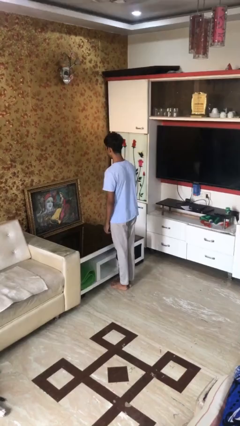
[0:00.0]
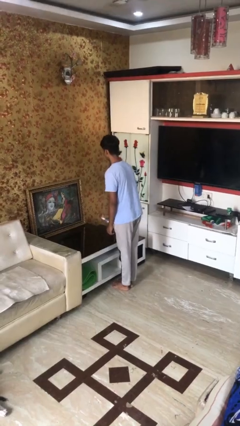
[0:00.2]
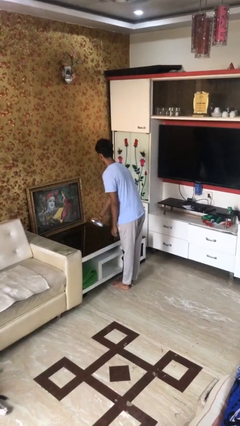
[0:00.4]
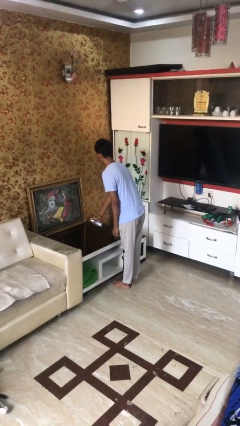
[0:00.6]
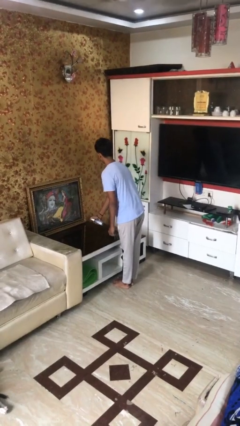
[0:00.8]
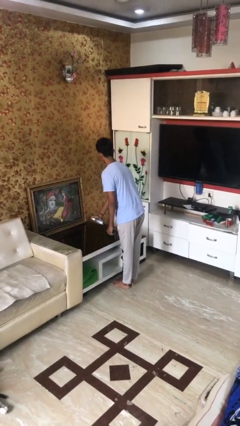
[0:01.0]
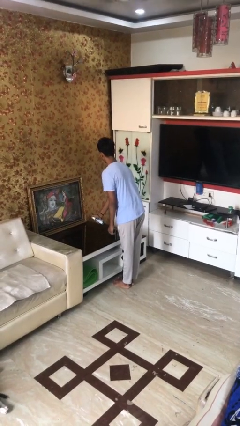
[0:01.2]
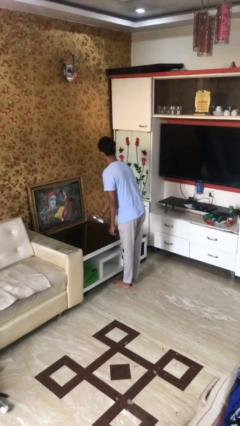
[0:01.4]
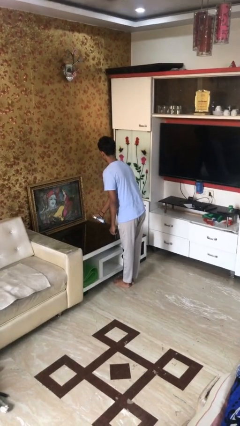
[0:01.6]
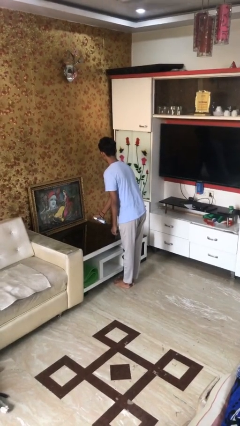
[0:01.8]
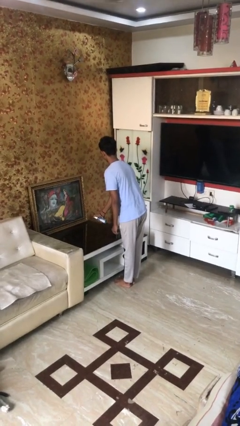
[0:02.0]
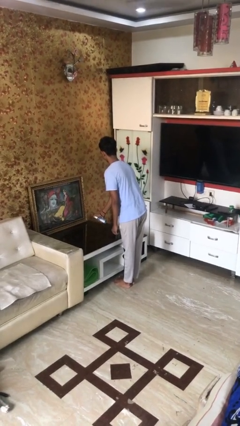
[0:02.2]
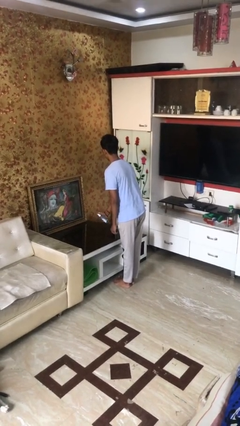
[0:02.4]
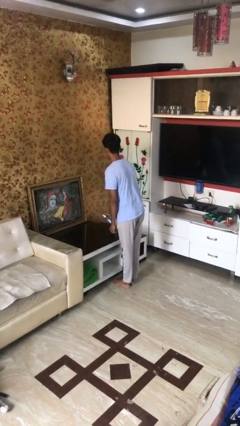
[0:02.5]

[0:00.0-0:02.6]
person sprays from bottle

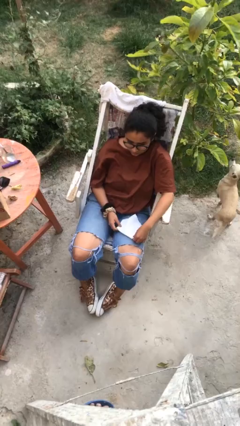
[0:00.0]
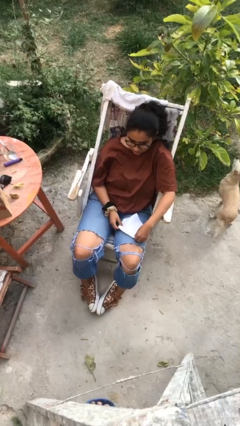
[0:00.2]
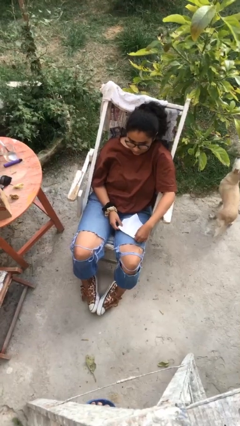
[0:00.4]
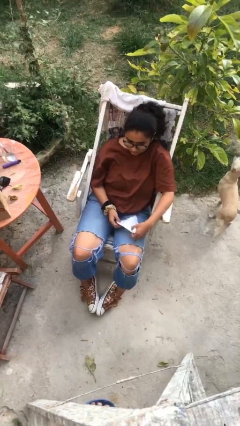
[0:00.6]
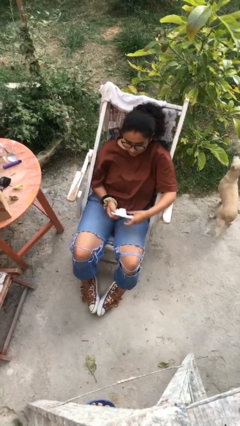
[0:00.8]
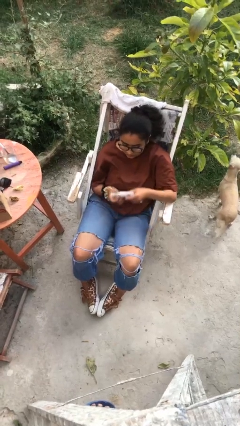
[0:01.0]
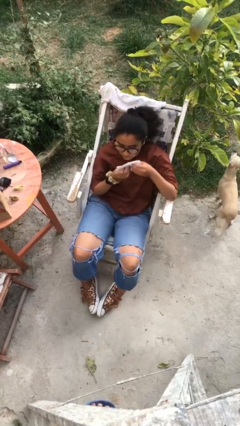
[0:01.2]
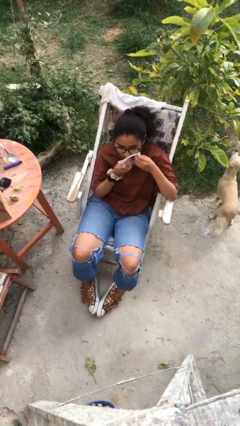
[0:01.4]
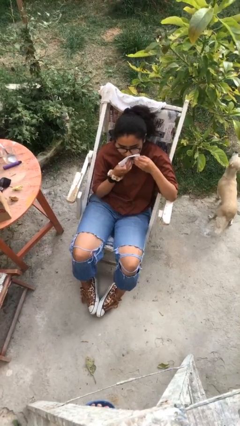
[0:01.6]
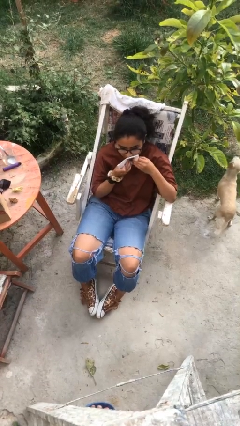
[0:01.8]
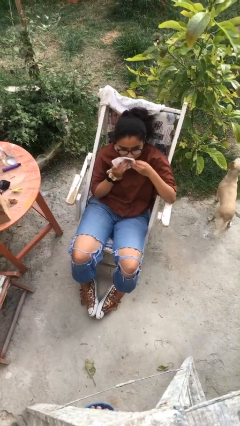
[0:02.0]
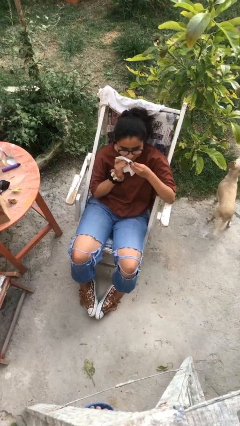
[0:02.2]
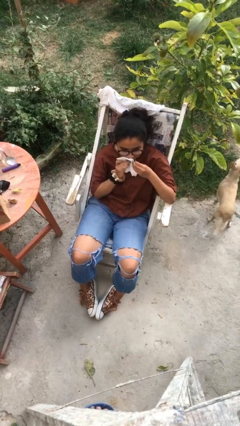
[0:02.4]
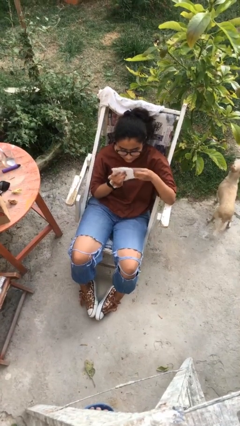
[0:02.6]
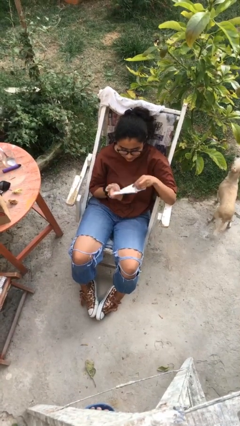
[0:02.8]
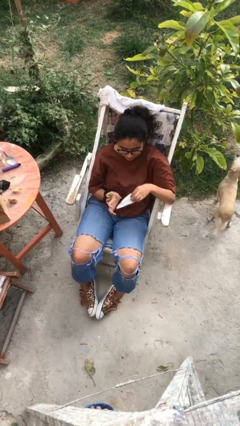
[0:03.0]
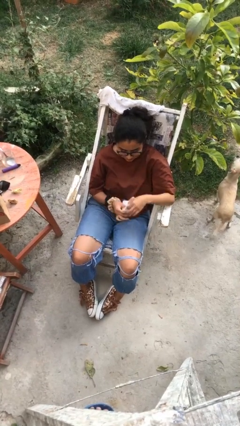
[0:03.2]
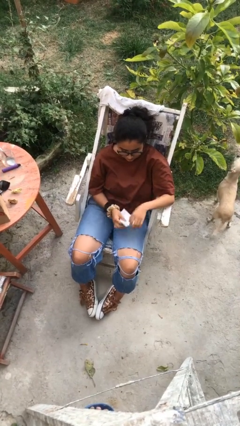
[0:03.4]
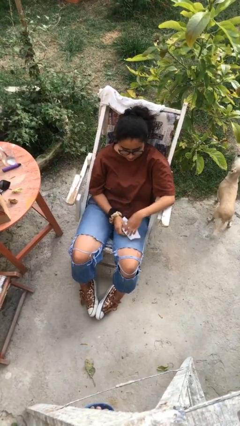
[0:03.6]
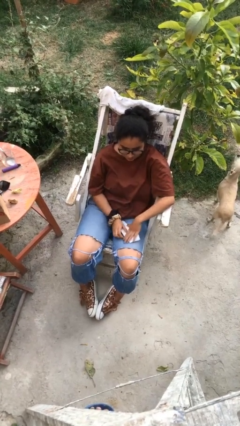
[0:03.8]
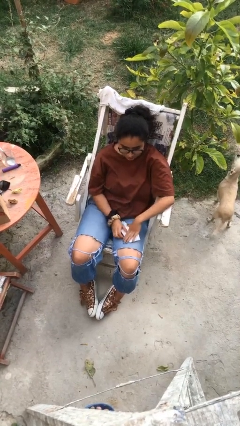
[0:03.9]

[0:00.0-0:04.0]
person wipes mouth with napkin

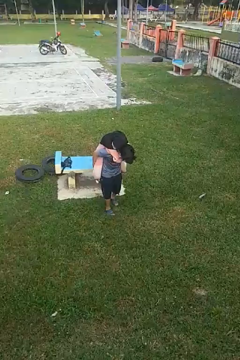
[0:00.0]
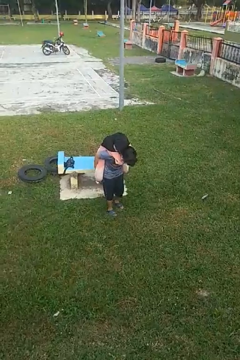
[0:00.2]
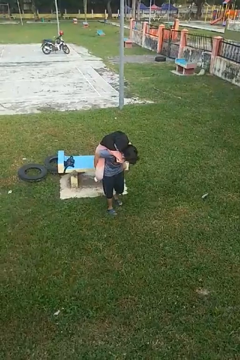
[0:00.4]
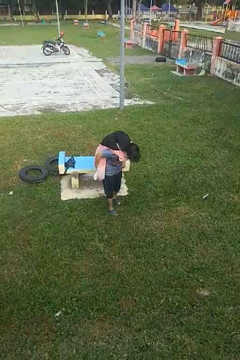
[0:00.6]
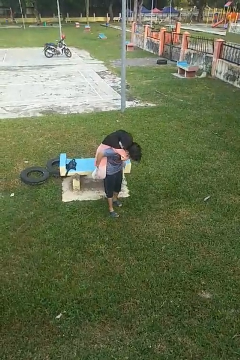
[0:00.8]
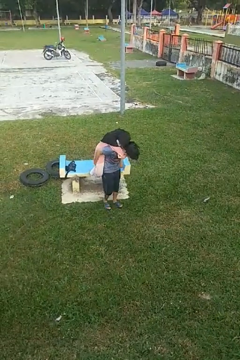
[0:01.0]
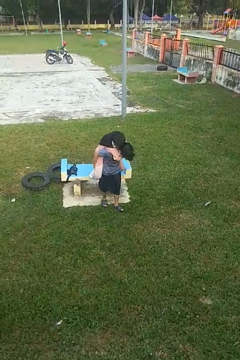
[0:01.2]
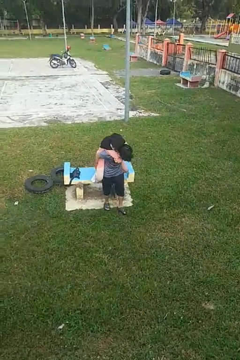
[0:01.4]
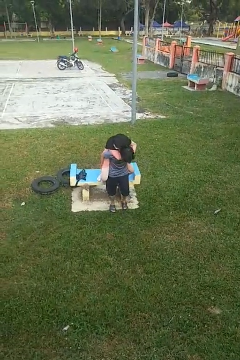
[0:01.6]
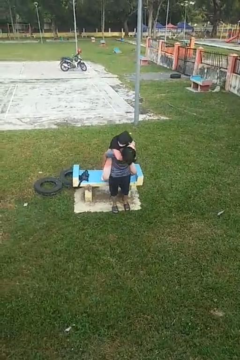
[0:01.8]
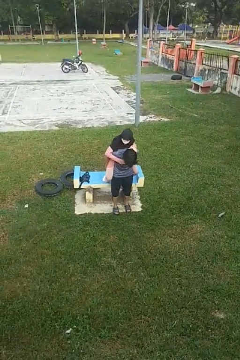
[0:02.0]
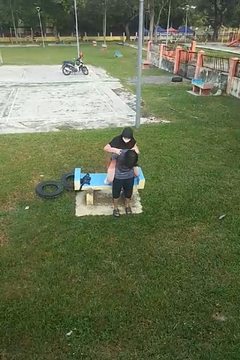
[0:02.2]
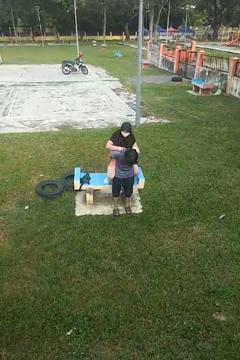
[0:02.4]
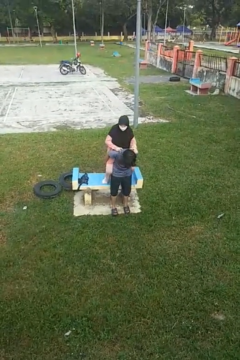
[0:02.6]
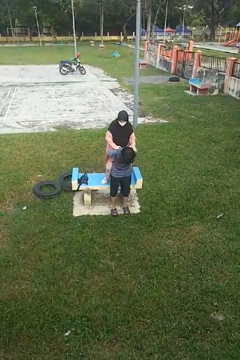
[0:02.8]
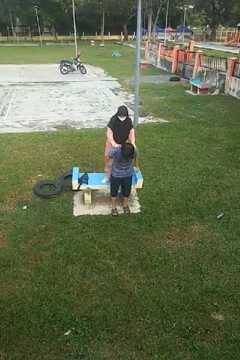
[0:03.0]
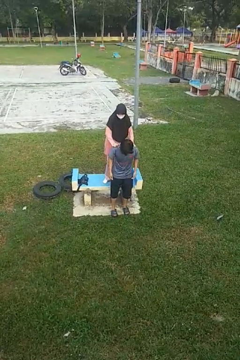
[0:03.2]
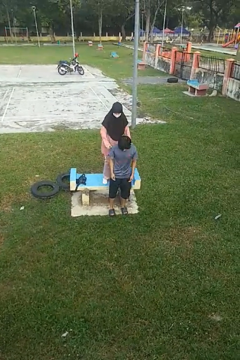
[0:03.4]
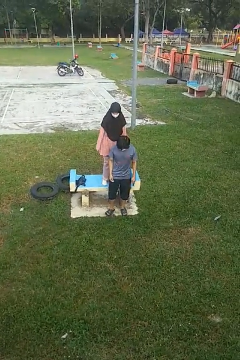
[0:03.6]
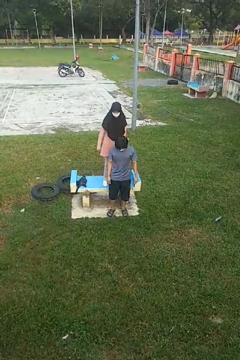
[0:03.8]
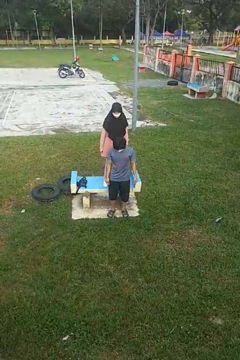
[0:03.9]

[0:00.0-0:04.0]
person puts down person

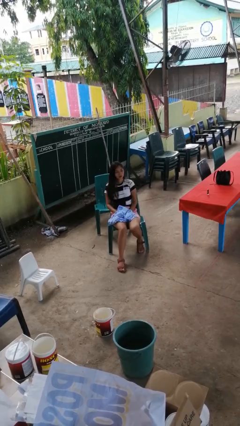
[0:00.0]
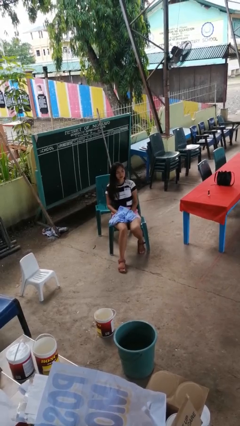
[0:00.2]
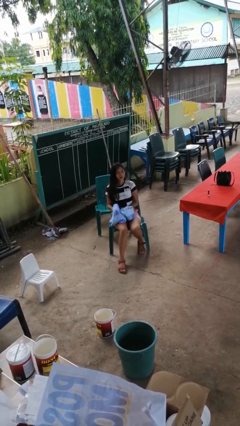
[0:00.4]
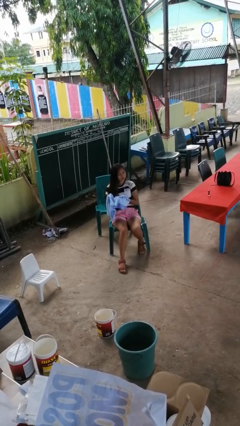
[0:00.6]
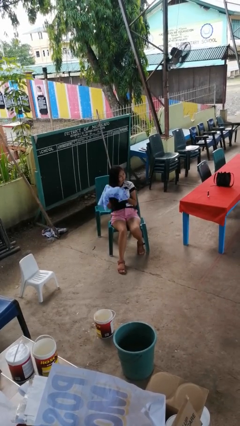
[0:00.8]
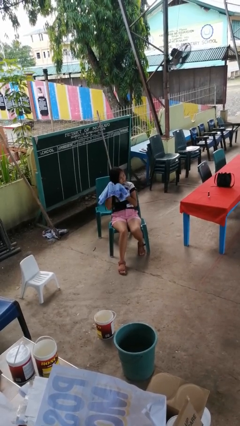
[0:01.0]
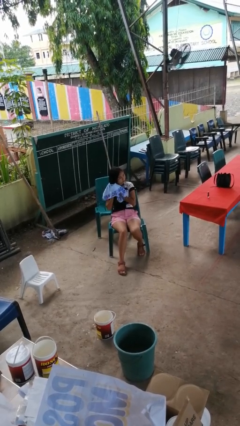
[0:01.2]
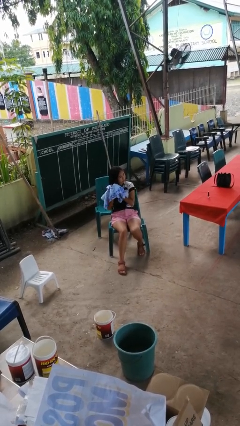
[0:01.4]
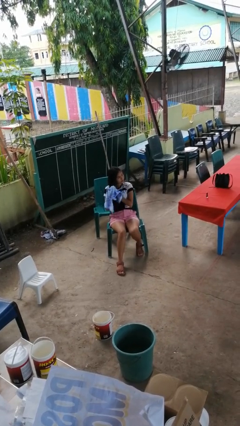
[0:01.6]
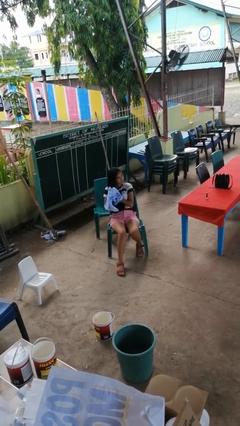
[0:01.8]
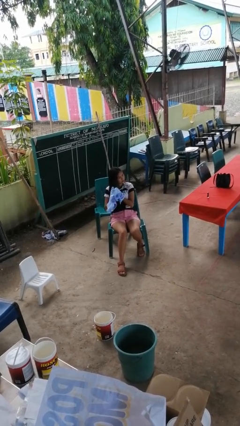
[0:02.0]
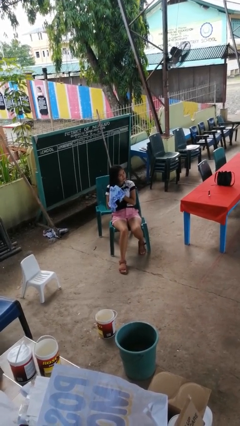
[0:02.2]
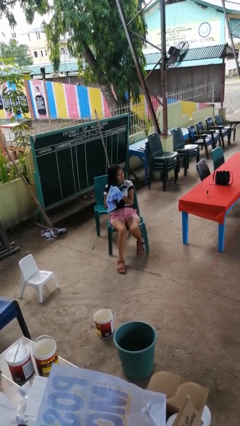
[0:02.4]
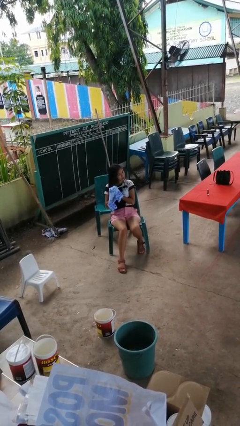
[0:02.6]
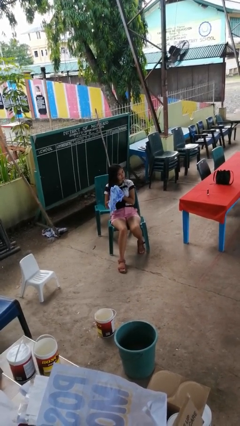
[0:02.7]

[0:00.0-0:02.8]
person dries hair with towel

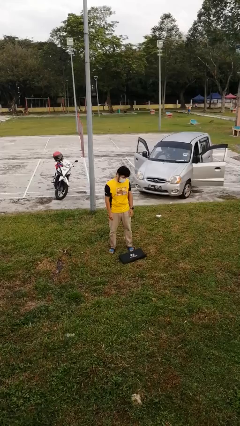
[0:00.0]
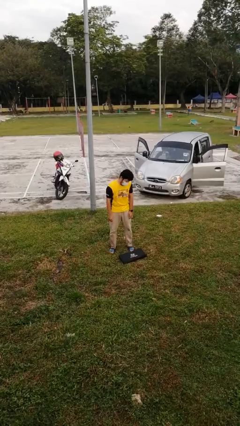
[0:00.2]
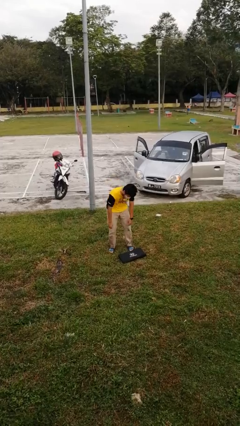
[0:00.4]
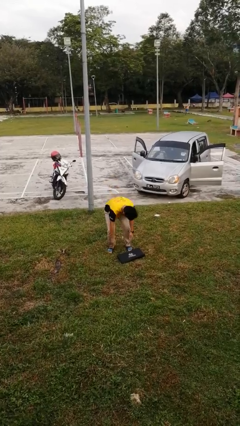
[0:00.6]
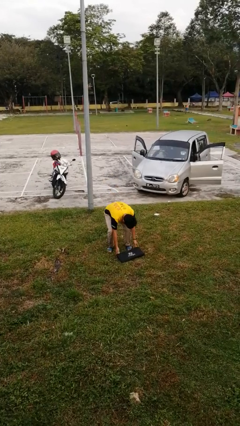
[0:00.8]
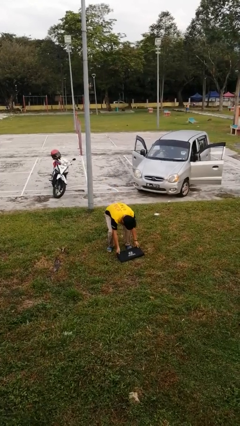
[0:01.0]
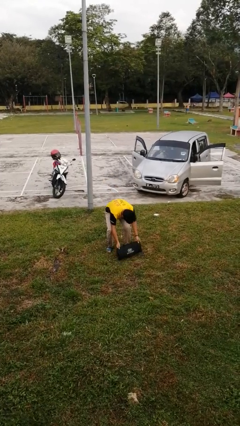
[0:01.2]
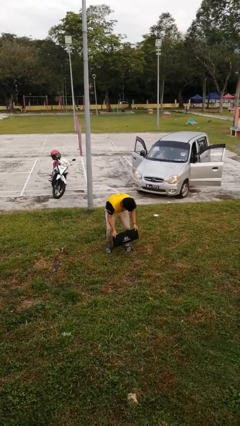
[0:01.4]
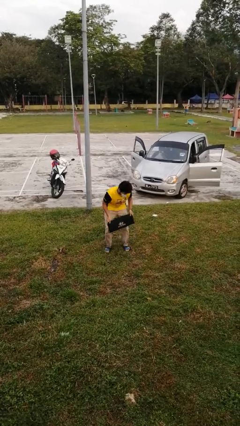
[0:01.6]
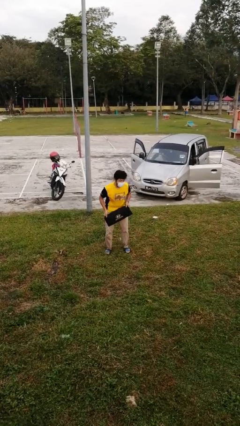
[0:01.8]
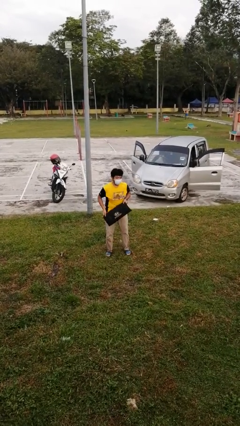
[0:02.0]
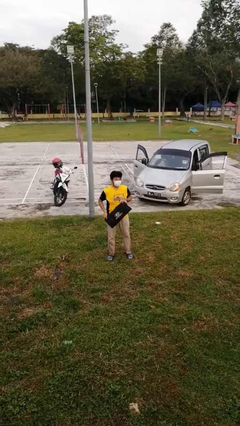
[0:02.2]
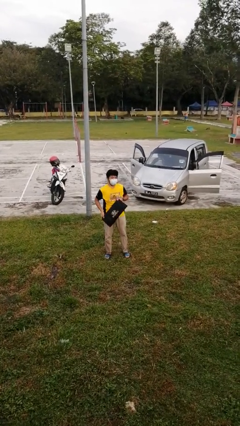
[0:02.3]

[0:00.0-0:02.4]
person picks up object from floor

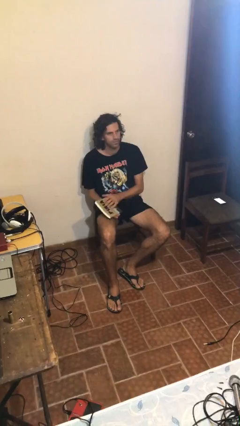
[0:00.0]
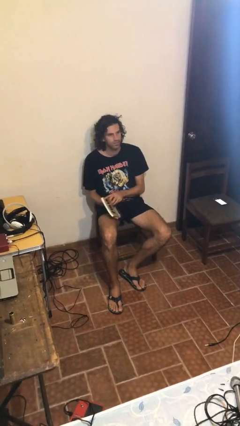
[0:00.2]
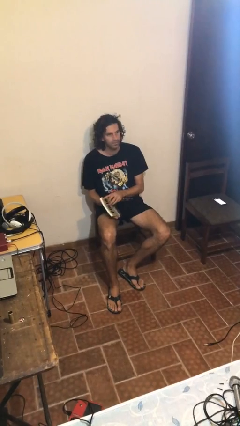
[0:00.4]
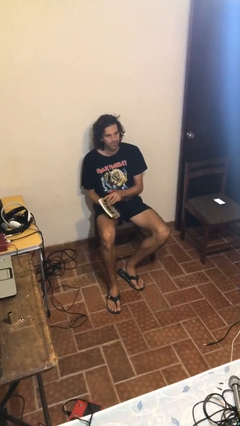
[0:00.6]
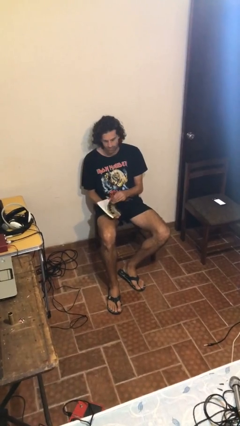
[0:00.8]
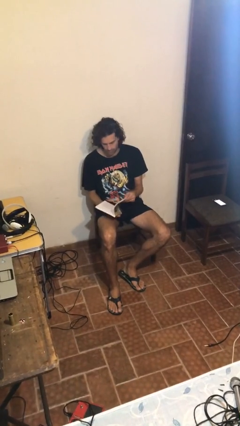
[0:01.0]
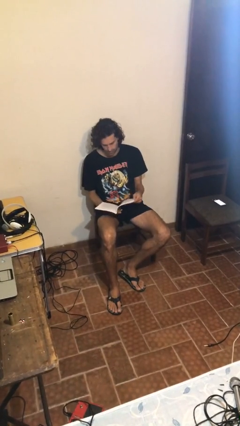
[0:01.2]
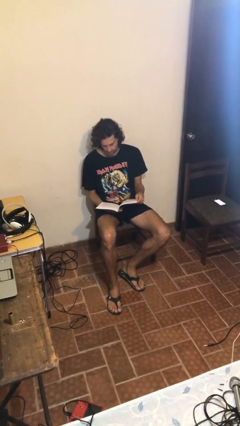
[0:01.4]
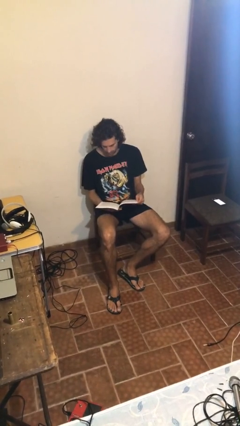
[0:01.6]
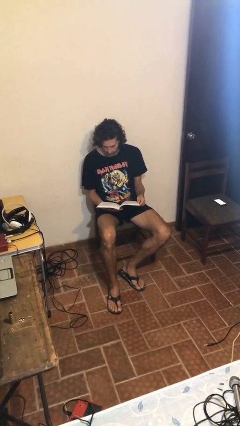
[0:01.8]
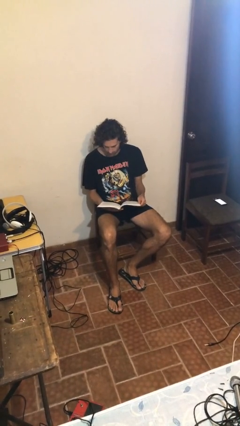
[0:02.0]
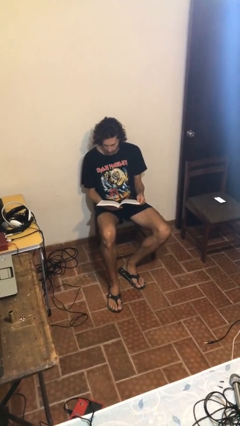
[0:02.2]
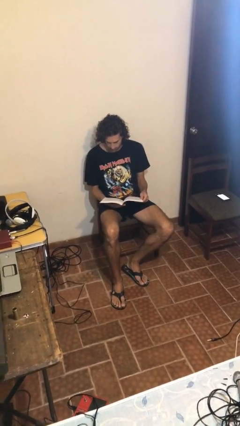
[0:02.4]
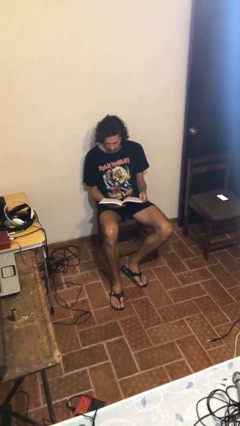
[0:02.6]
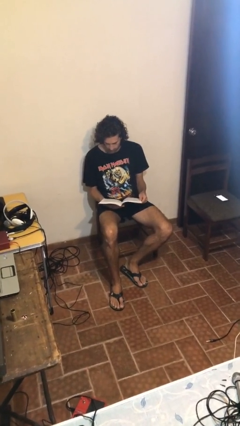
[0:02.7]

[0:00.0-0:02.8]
person reads document
